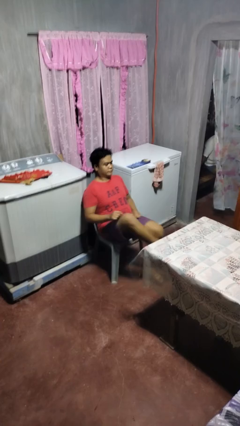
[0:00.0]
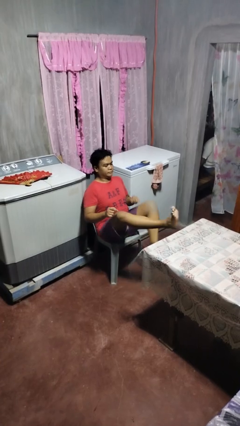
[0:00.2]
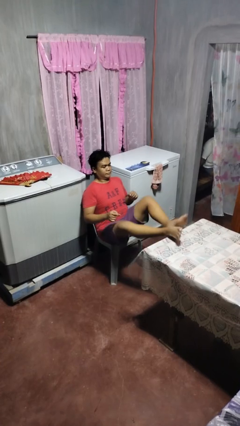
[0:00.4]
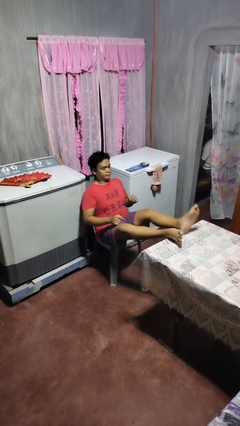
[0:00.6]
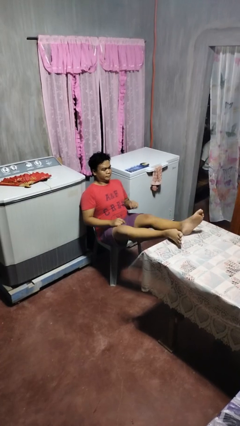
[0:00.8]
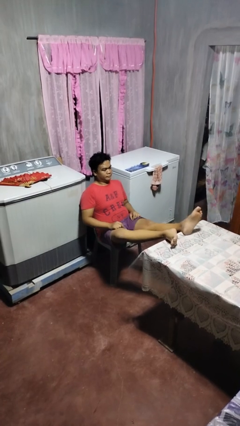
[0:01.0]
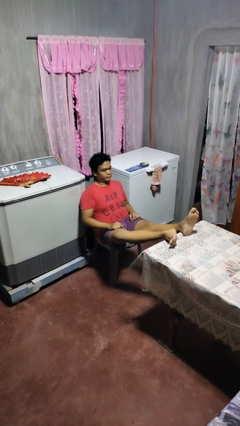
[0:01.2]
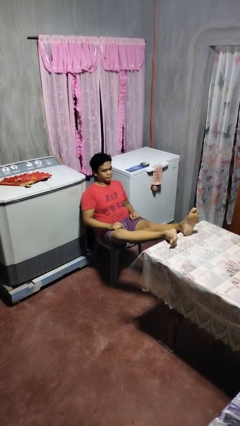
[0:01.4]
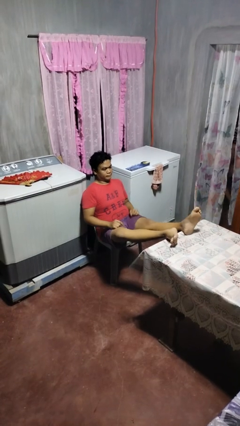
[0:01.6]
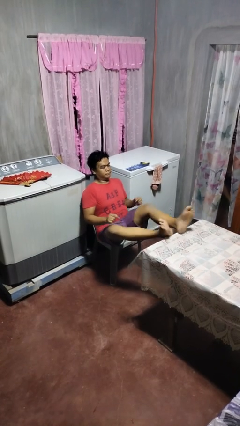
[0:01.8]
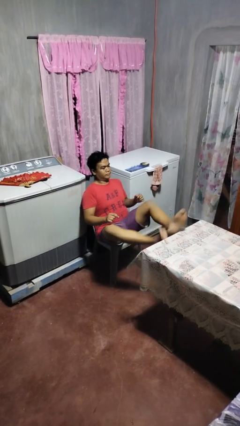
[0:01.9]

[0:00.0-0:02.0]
person puts feet up

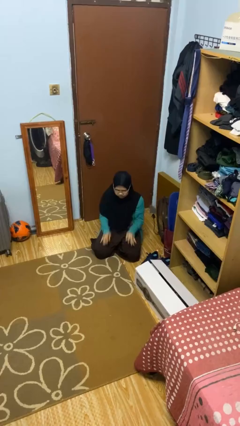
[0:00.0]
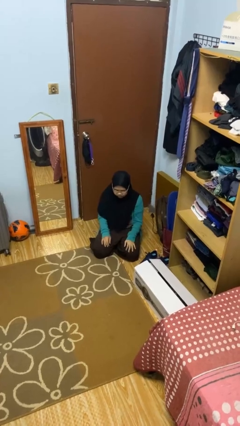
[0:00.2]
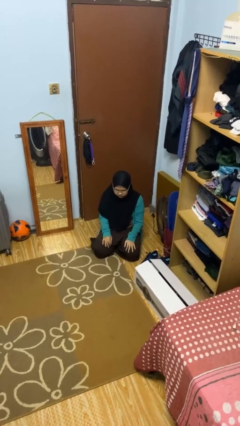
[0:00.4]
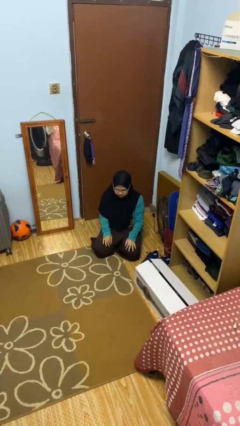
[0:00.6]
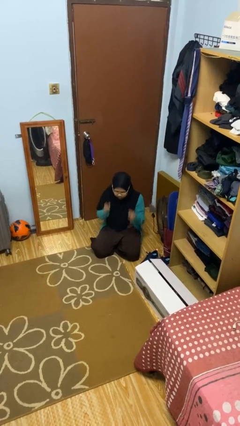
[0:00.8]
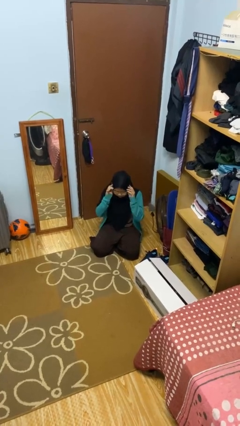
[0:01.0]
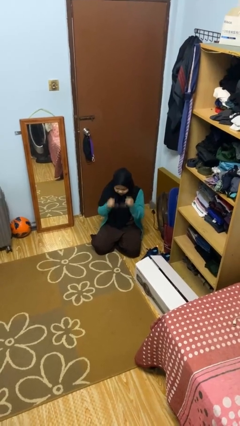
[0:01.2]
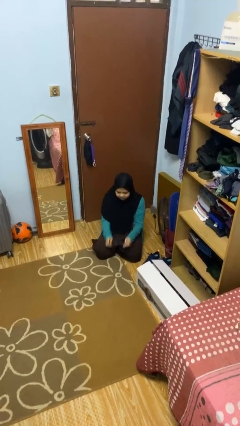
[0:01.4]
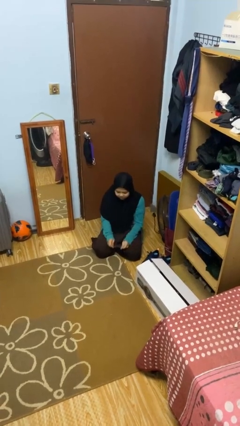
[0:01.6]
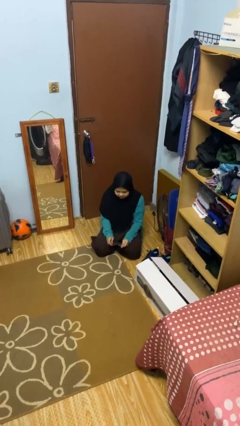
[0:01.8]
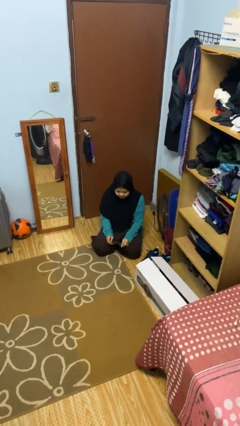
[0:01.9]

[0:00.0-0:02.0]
person takes off glasses

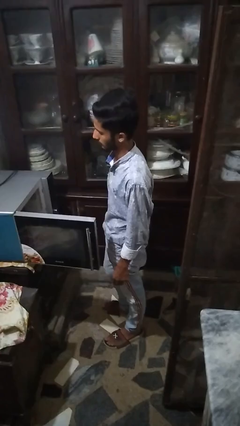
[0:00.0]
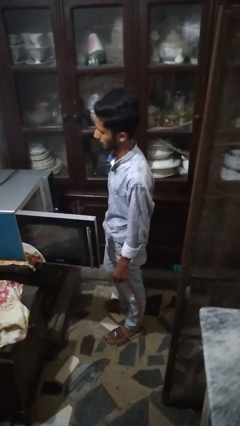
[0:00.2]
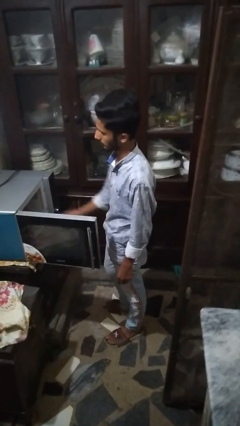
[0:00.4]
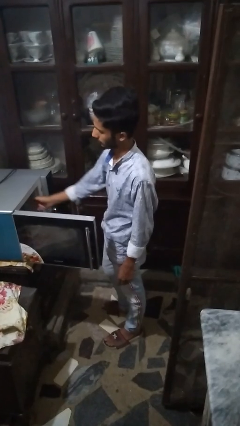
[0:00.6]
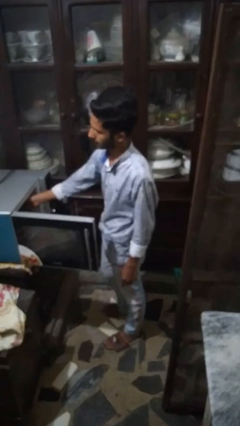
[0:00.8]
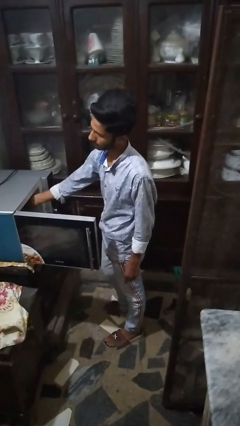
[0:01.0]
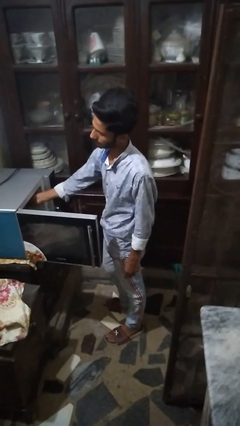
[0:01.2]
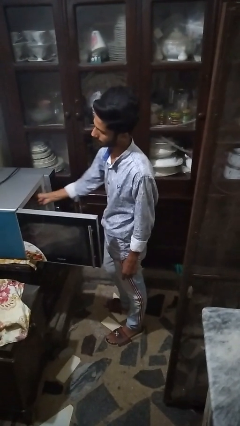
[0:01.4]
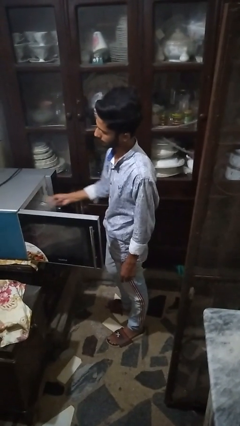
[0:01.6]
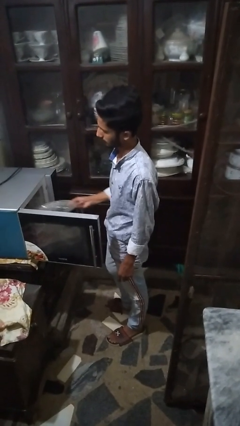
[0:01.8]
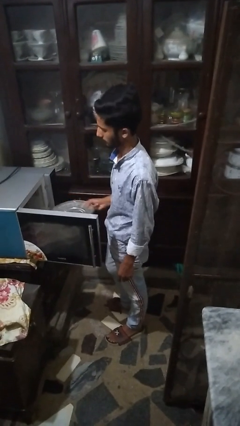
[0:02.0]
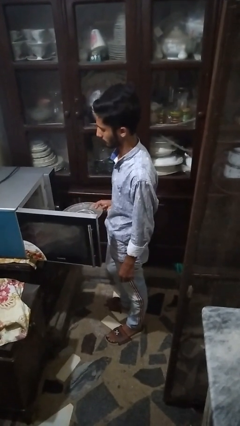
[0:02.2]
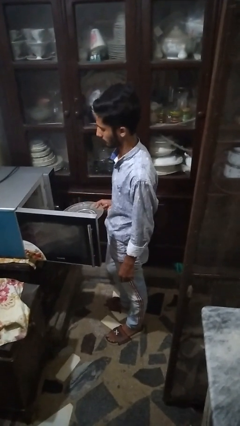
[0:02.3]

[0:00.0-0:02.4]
person takes object from microwave

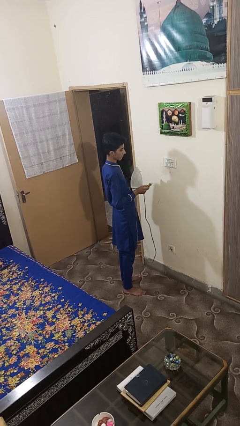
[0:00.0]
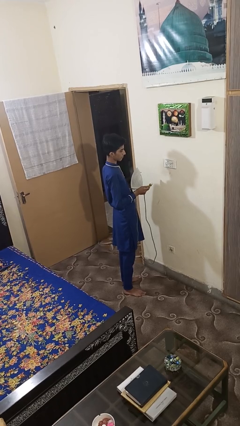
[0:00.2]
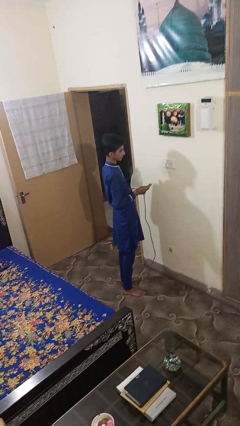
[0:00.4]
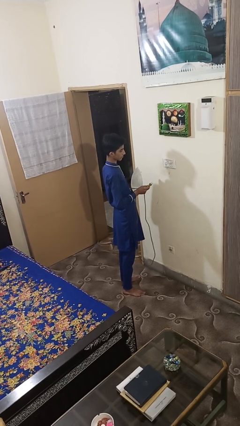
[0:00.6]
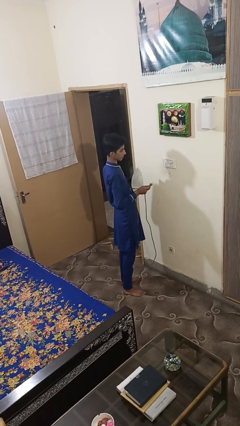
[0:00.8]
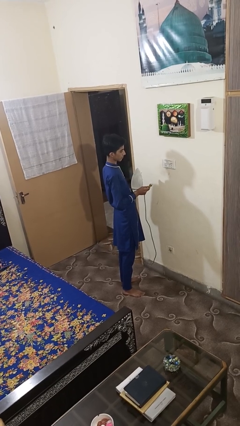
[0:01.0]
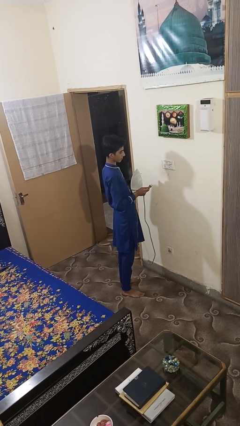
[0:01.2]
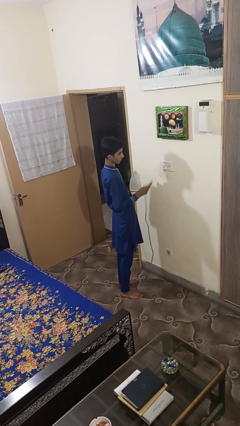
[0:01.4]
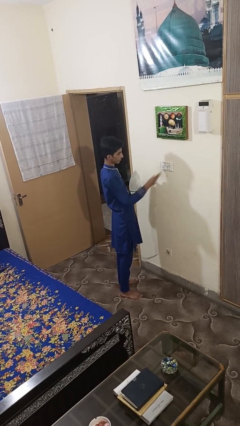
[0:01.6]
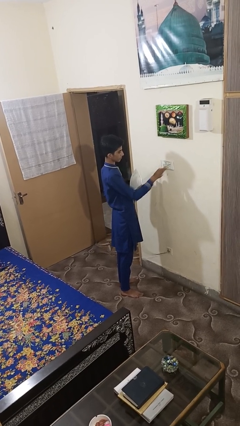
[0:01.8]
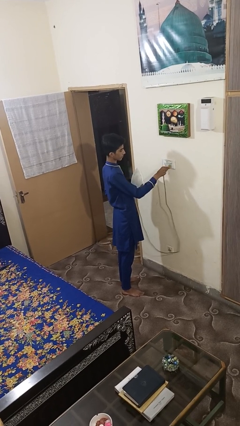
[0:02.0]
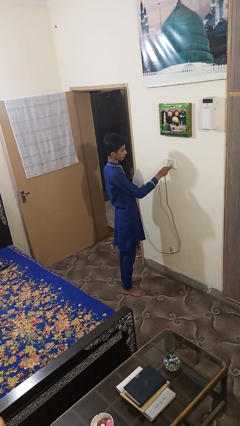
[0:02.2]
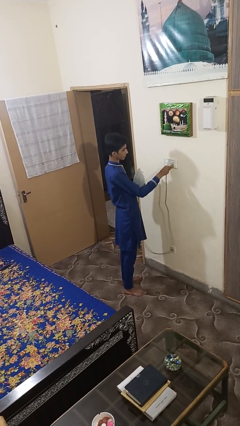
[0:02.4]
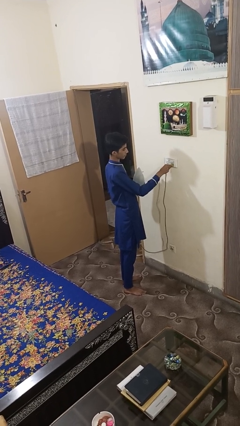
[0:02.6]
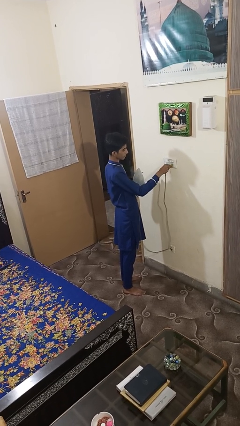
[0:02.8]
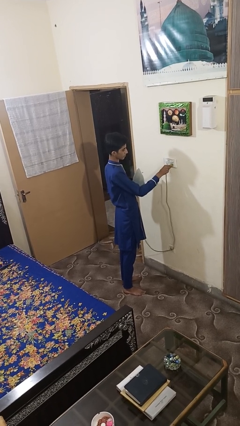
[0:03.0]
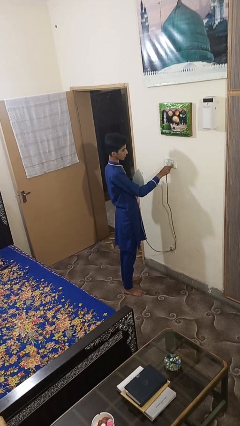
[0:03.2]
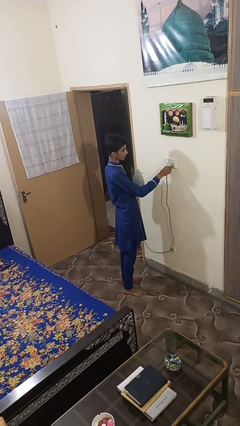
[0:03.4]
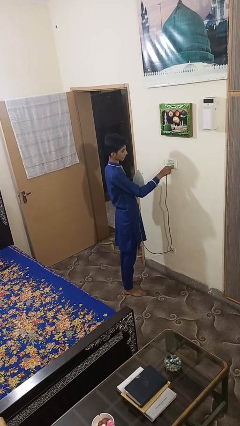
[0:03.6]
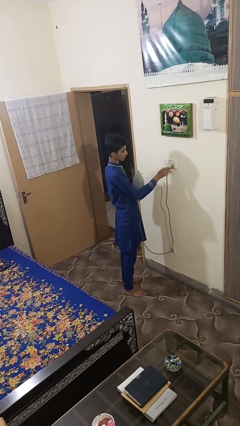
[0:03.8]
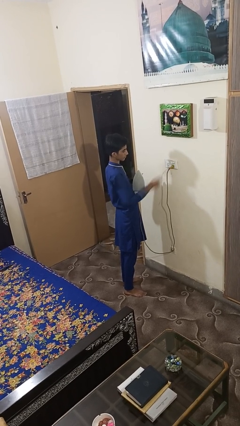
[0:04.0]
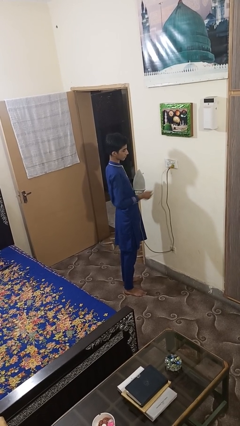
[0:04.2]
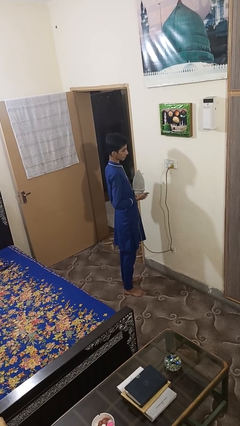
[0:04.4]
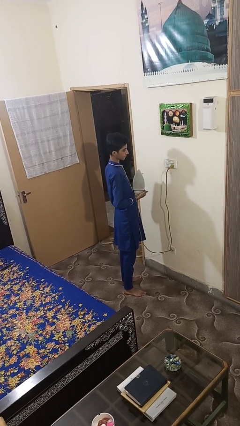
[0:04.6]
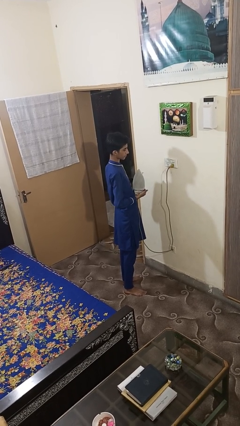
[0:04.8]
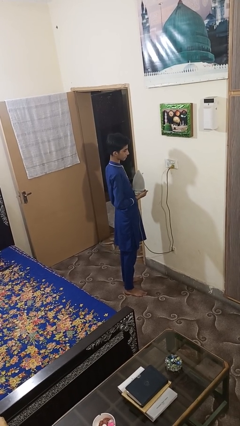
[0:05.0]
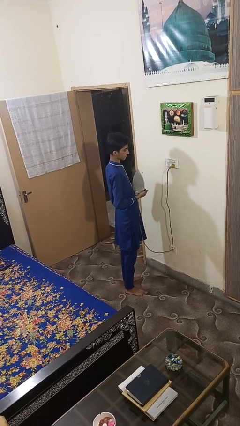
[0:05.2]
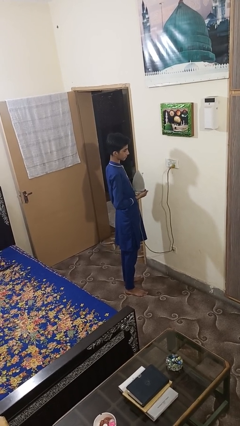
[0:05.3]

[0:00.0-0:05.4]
person plugs into electrical socket

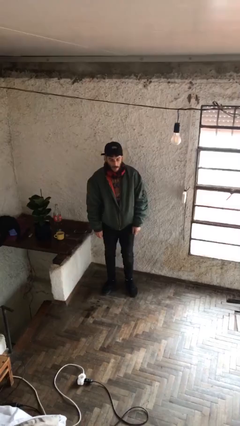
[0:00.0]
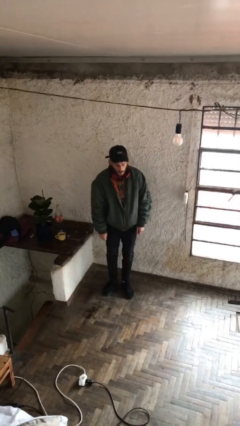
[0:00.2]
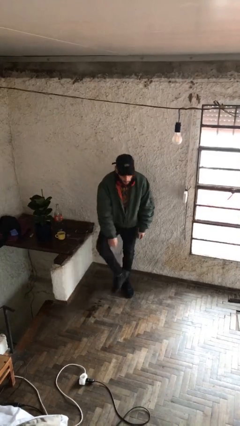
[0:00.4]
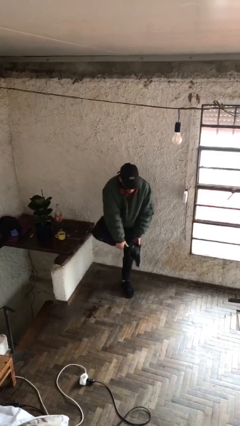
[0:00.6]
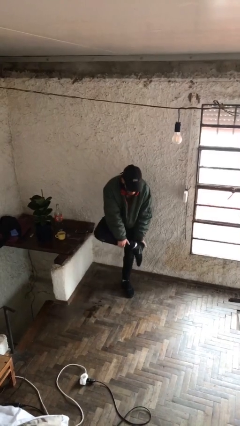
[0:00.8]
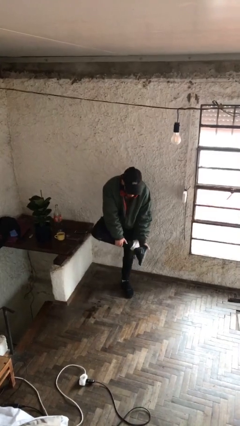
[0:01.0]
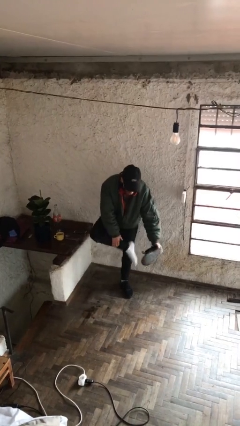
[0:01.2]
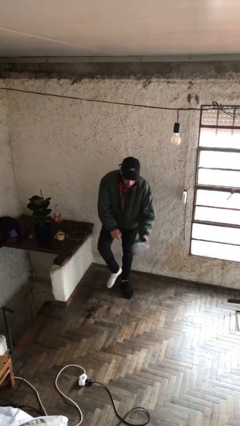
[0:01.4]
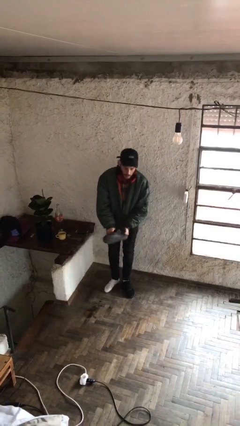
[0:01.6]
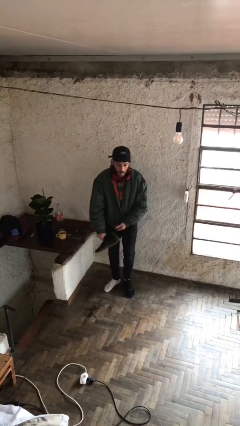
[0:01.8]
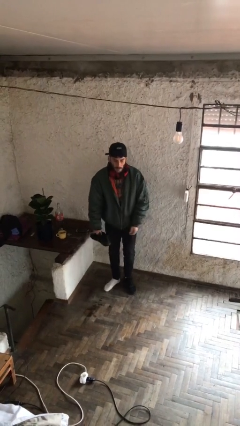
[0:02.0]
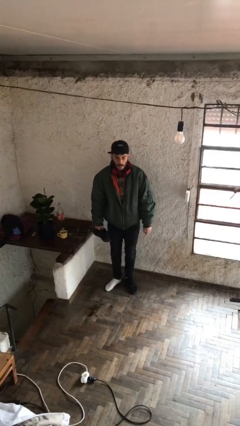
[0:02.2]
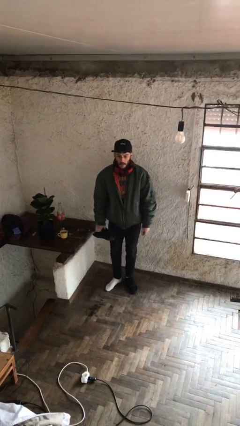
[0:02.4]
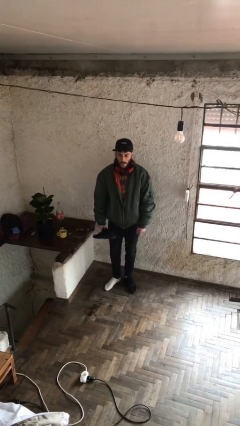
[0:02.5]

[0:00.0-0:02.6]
person takes off shoes

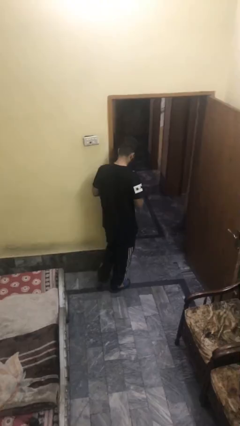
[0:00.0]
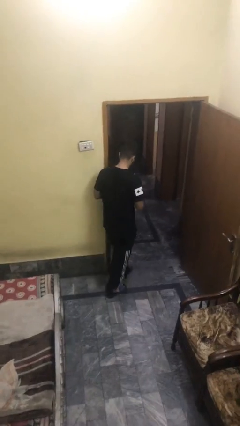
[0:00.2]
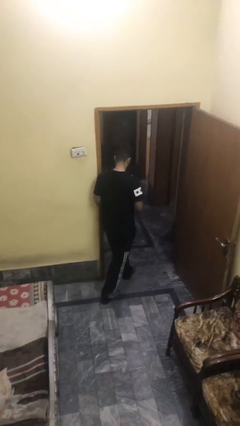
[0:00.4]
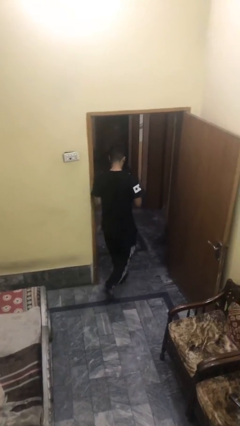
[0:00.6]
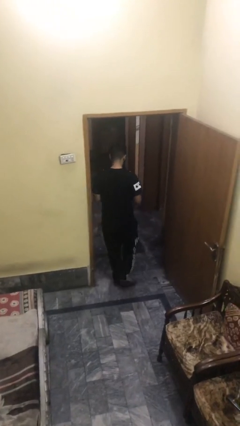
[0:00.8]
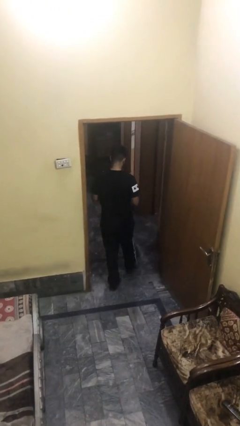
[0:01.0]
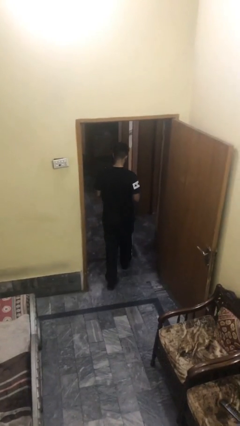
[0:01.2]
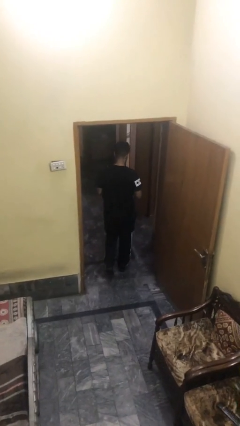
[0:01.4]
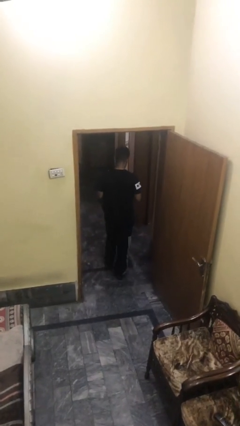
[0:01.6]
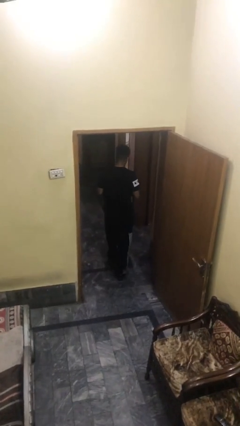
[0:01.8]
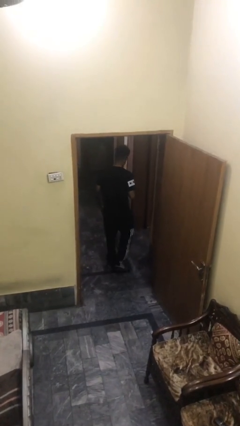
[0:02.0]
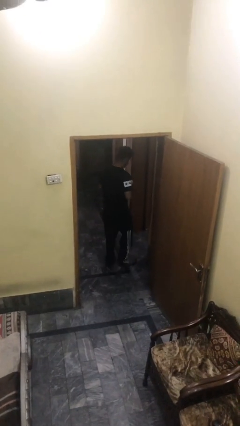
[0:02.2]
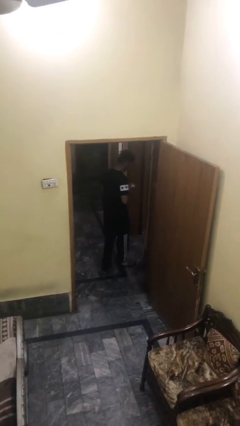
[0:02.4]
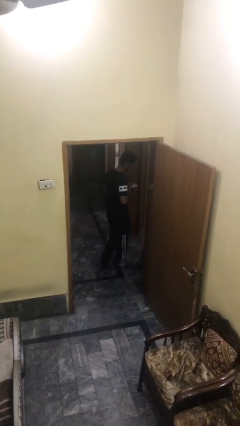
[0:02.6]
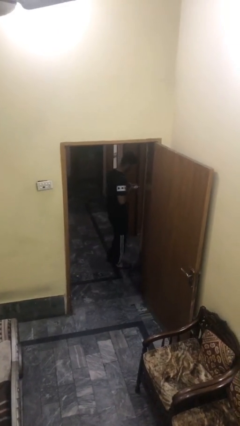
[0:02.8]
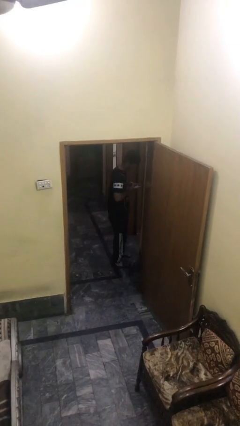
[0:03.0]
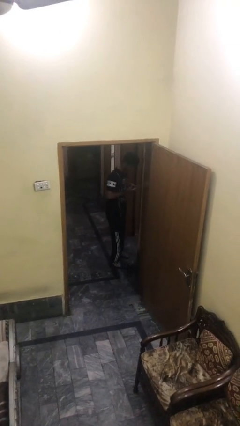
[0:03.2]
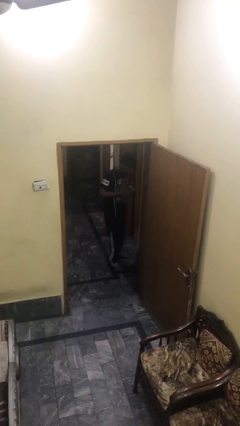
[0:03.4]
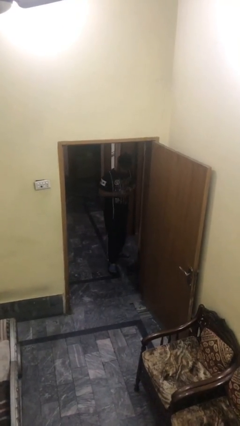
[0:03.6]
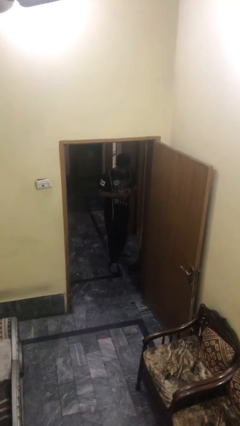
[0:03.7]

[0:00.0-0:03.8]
person exits scene through structure
